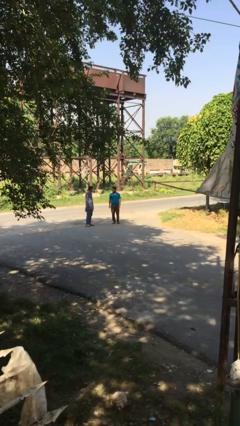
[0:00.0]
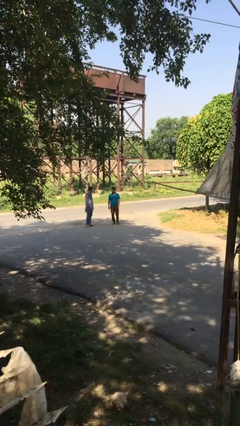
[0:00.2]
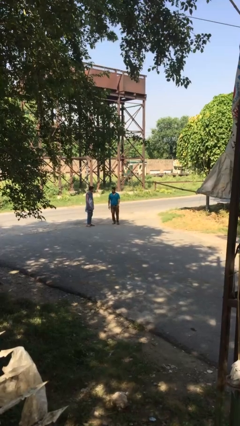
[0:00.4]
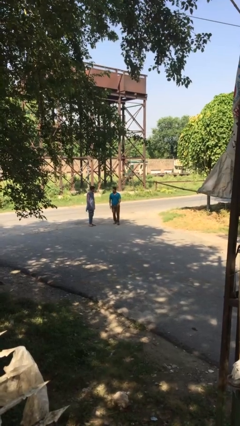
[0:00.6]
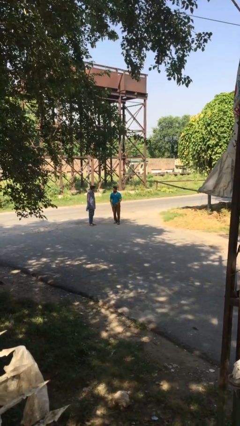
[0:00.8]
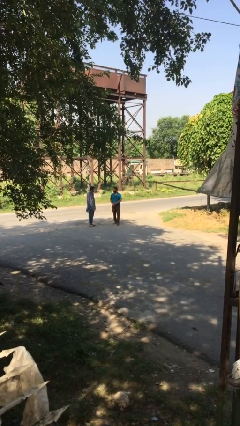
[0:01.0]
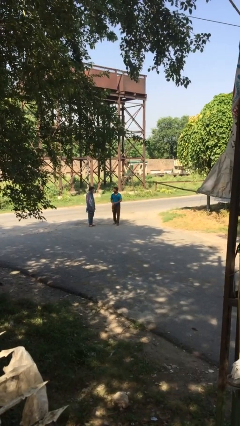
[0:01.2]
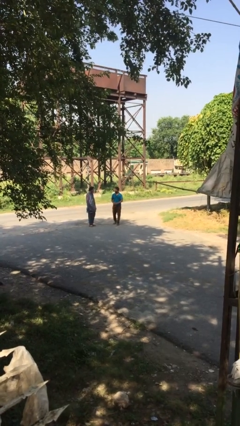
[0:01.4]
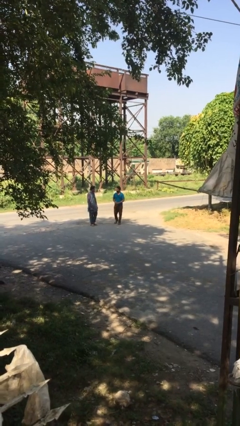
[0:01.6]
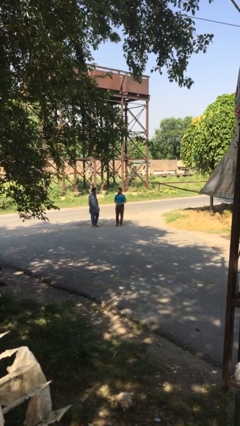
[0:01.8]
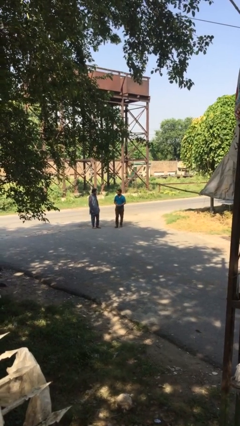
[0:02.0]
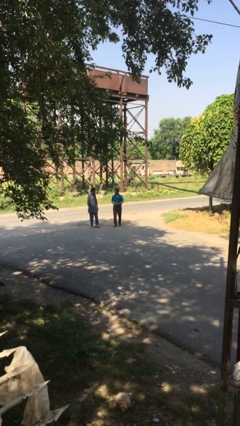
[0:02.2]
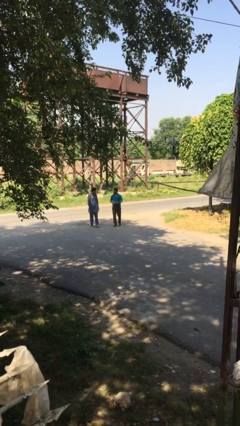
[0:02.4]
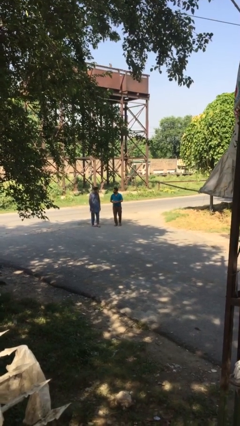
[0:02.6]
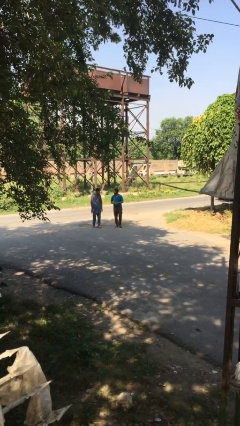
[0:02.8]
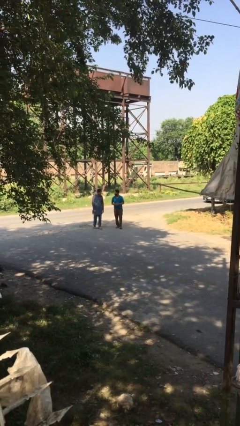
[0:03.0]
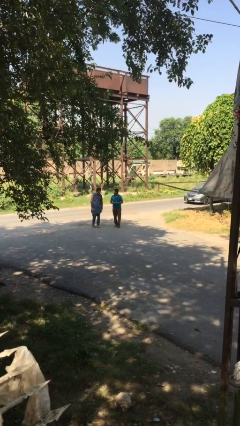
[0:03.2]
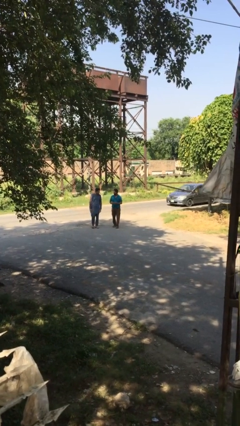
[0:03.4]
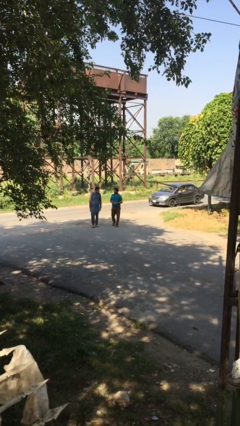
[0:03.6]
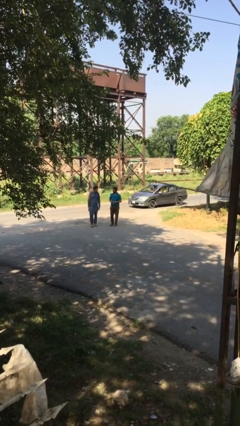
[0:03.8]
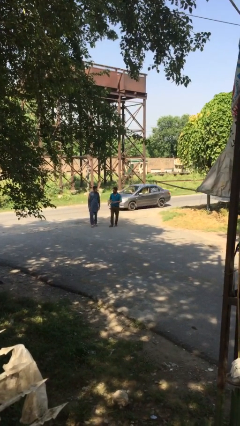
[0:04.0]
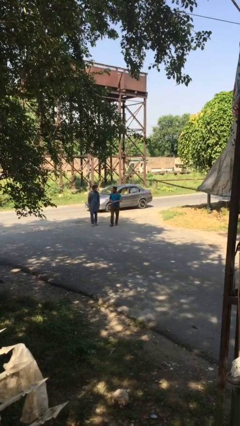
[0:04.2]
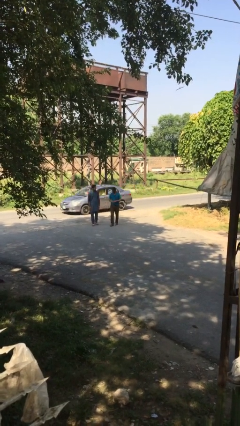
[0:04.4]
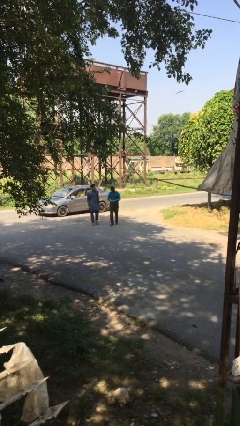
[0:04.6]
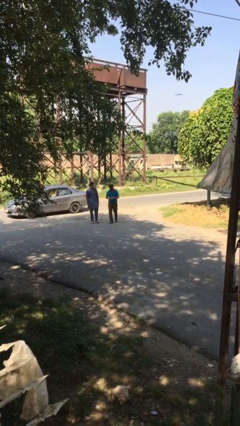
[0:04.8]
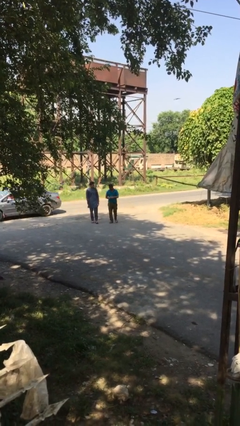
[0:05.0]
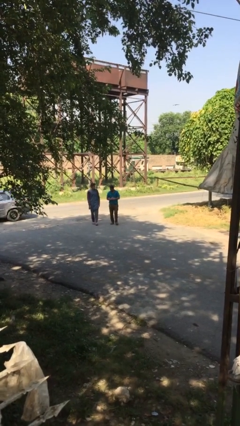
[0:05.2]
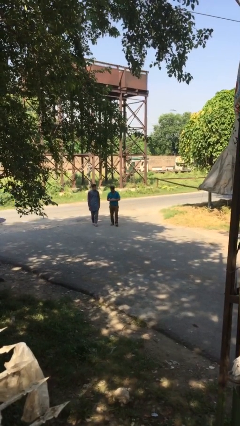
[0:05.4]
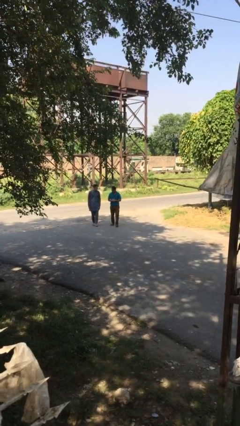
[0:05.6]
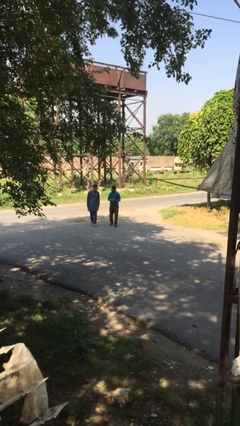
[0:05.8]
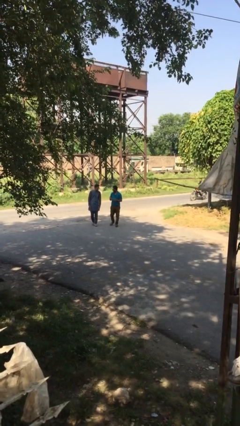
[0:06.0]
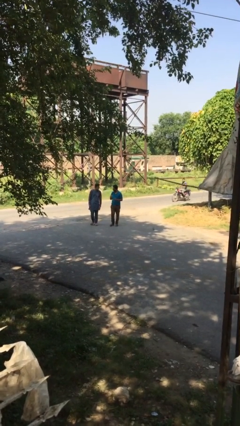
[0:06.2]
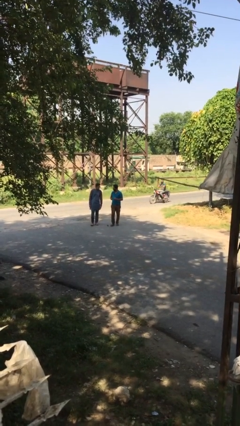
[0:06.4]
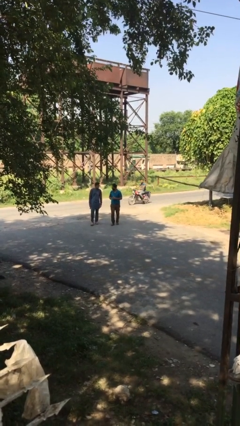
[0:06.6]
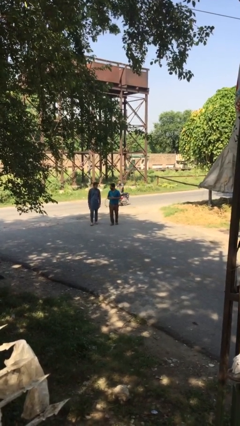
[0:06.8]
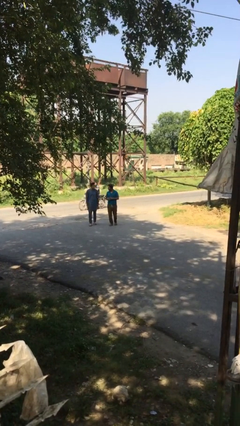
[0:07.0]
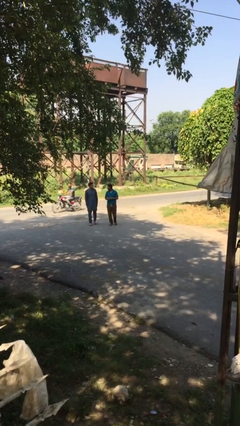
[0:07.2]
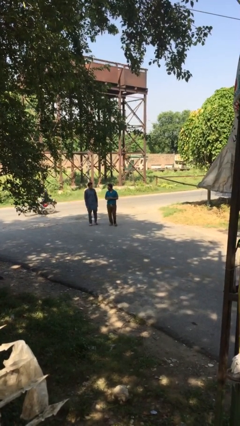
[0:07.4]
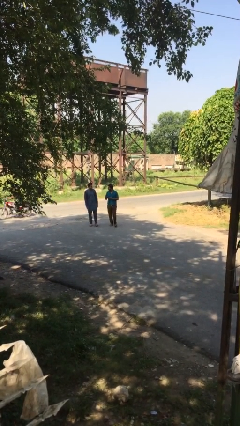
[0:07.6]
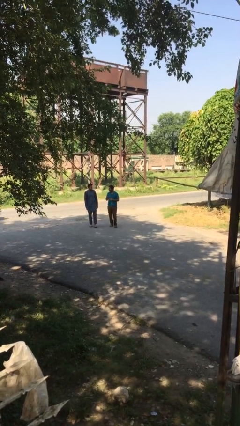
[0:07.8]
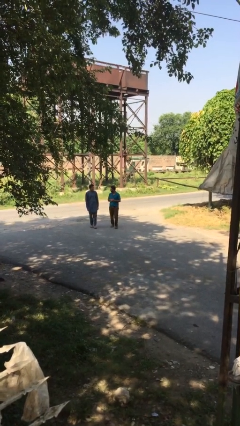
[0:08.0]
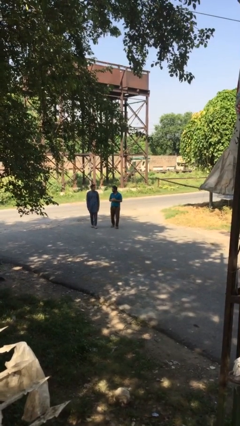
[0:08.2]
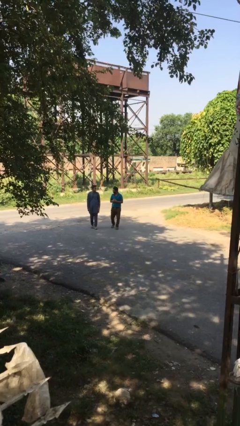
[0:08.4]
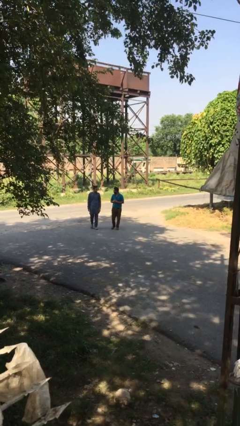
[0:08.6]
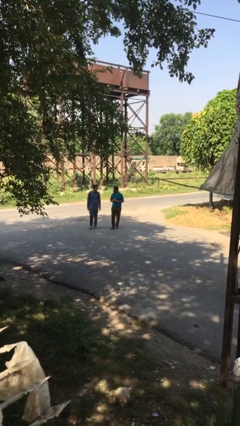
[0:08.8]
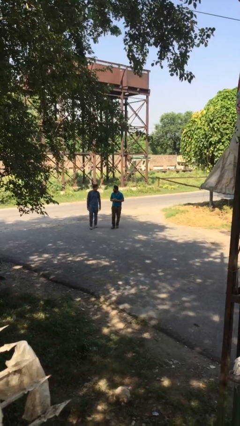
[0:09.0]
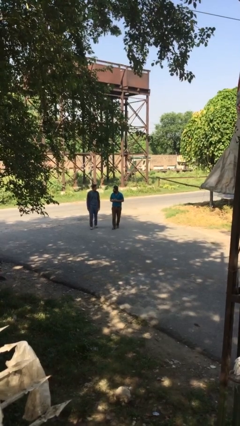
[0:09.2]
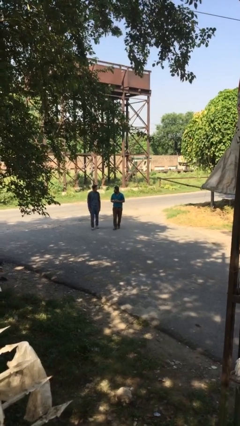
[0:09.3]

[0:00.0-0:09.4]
person talks to person

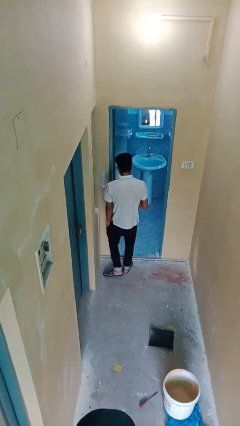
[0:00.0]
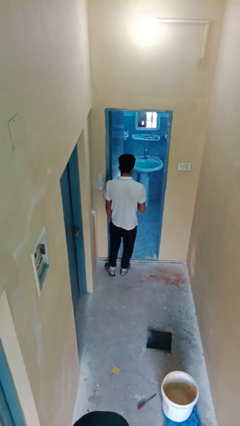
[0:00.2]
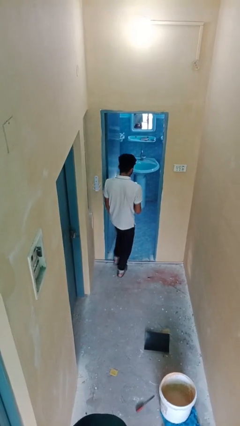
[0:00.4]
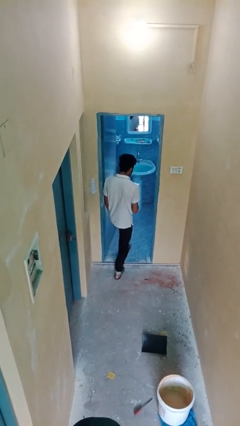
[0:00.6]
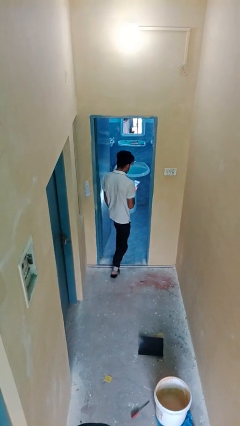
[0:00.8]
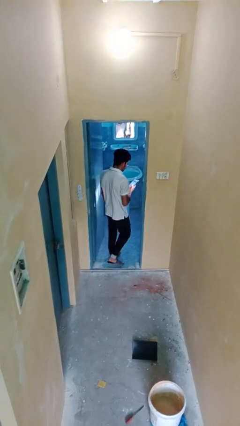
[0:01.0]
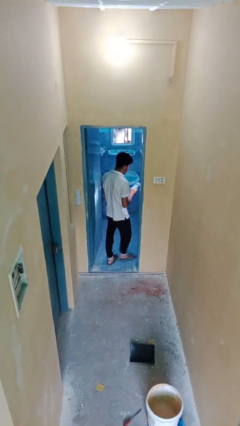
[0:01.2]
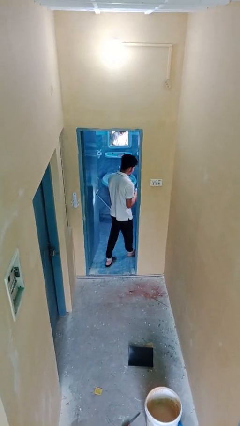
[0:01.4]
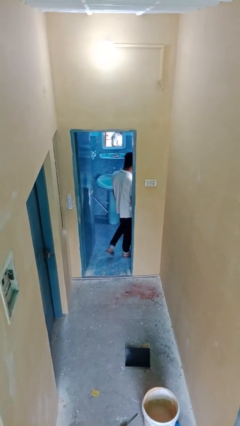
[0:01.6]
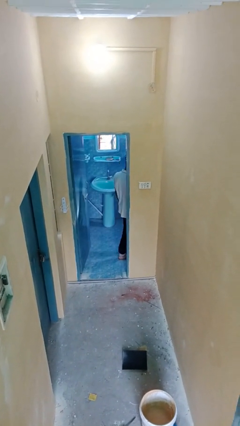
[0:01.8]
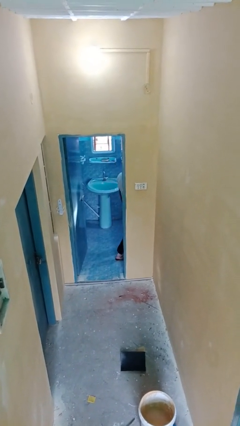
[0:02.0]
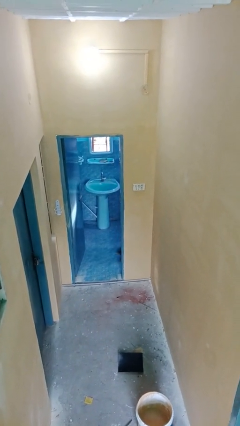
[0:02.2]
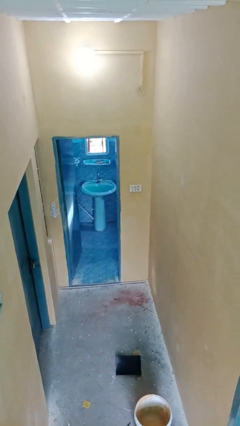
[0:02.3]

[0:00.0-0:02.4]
person exits scene through structure

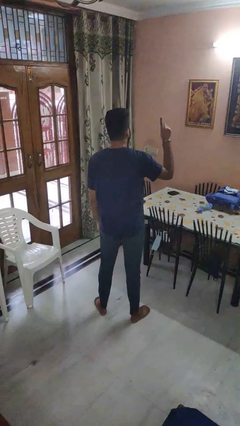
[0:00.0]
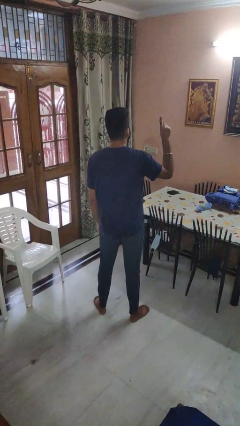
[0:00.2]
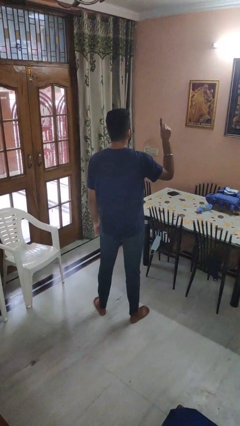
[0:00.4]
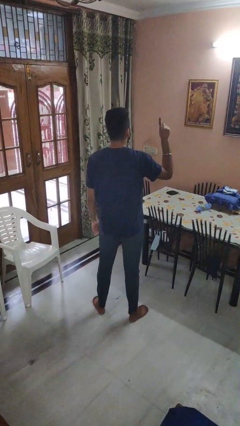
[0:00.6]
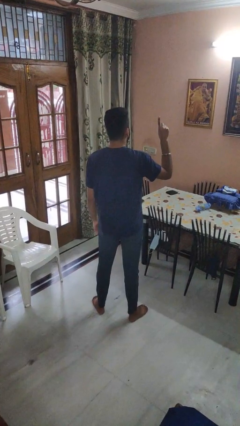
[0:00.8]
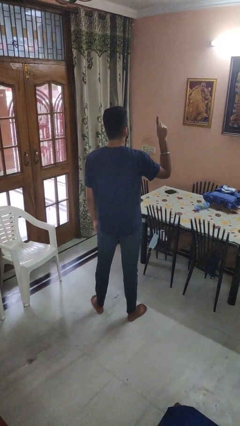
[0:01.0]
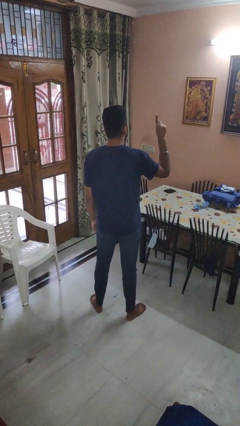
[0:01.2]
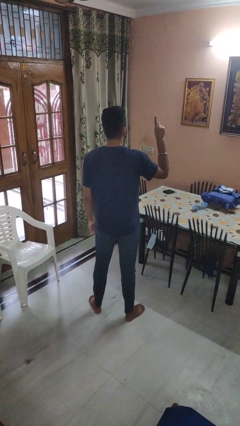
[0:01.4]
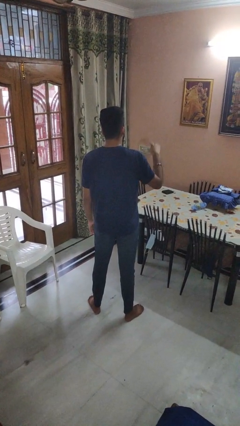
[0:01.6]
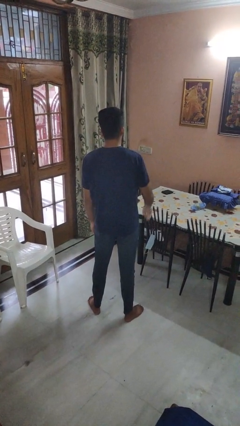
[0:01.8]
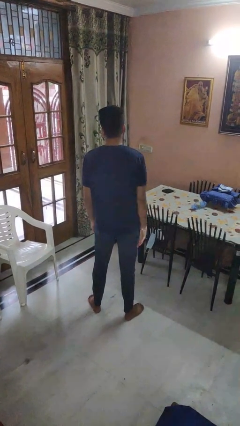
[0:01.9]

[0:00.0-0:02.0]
person gestures number one

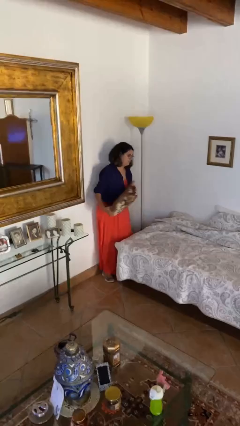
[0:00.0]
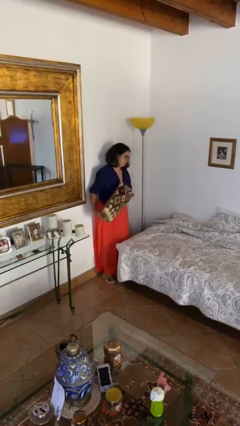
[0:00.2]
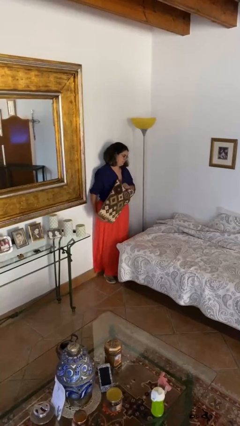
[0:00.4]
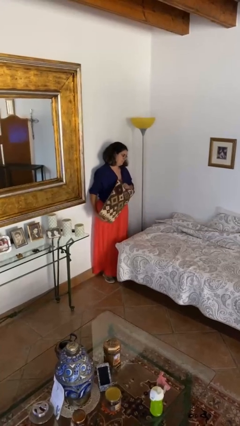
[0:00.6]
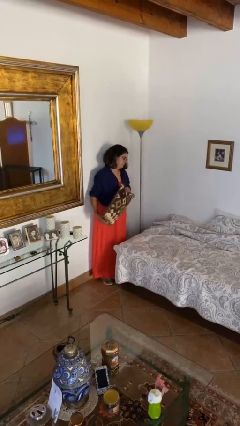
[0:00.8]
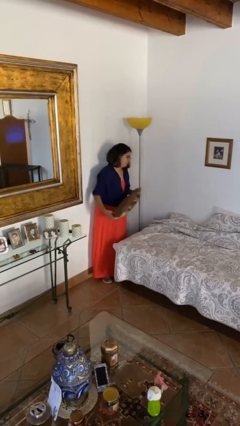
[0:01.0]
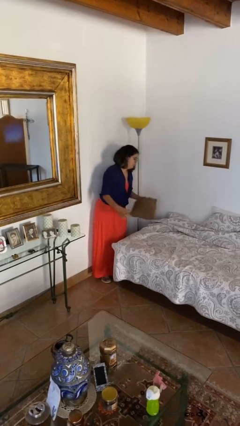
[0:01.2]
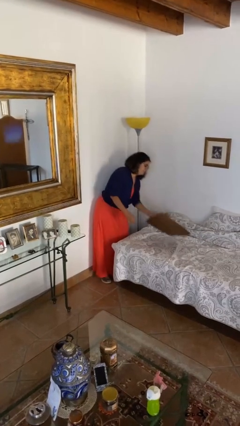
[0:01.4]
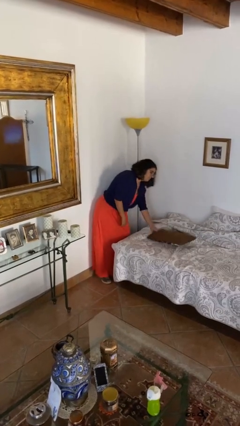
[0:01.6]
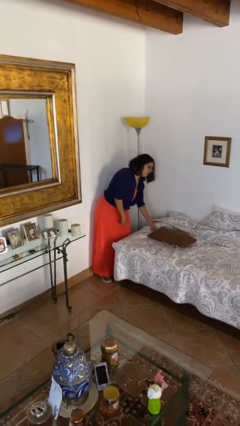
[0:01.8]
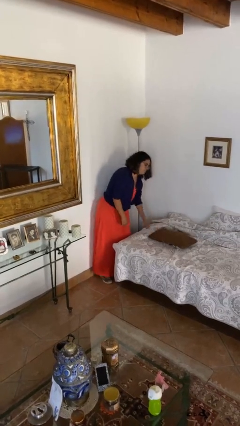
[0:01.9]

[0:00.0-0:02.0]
person puts down object on bed

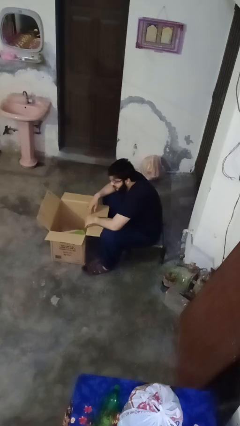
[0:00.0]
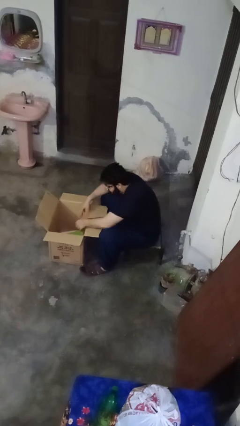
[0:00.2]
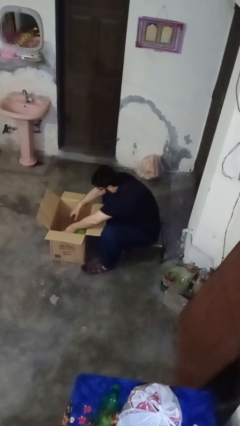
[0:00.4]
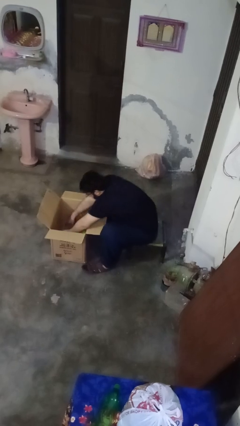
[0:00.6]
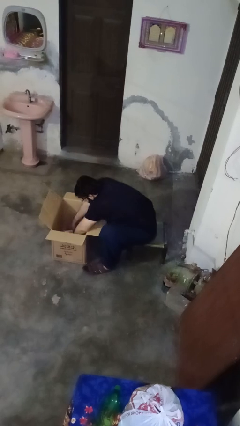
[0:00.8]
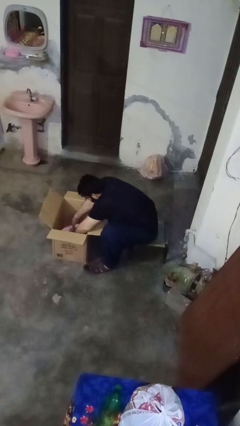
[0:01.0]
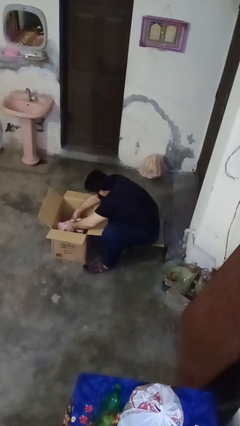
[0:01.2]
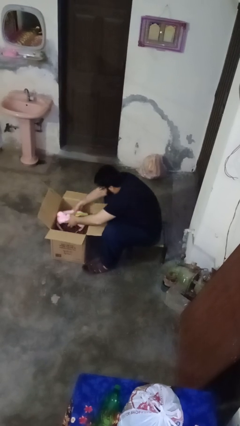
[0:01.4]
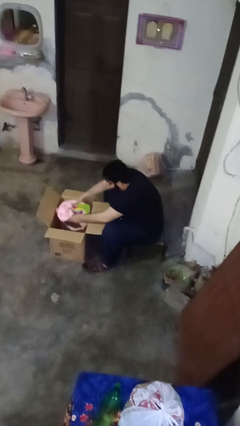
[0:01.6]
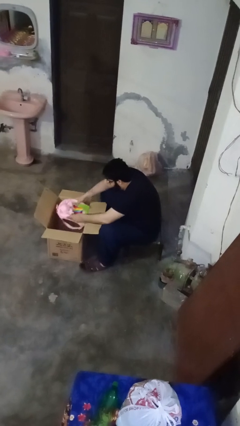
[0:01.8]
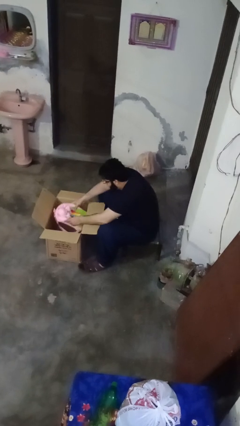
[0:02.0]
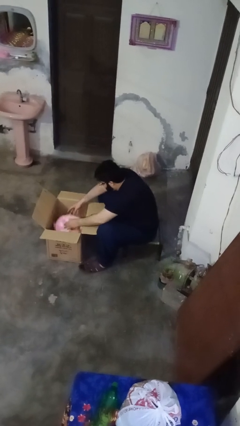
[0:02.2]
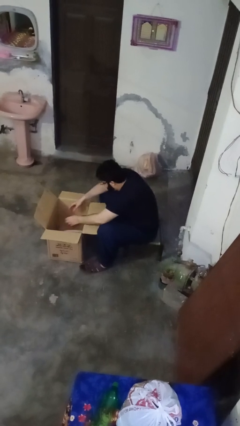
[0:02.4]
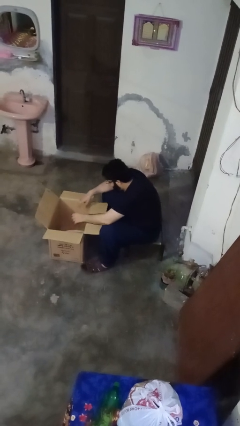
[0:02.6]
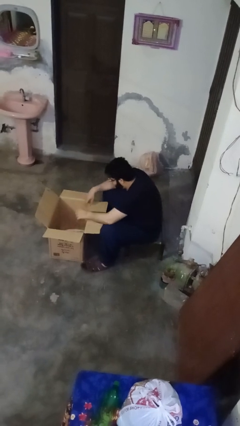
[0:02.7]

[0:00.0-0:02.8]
person searches in box
